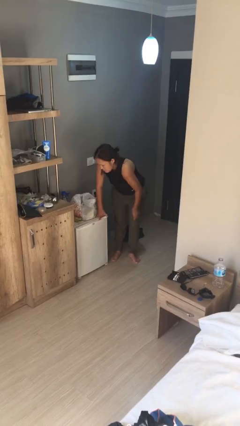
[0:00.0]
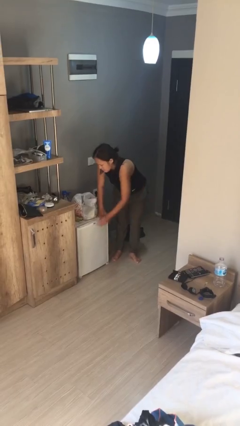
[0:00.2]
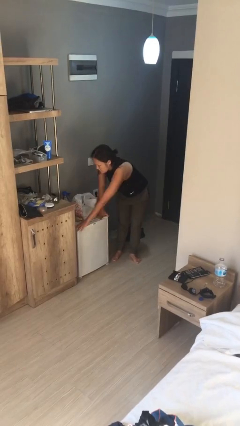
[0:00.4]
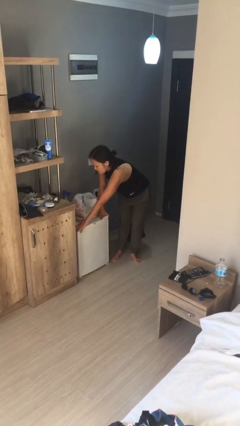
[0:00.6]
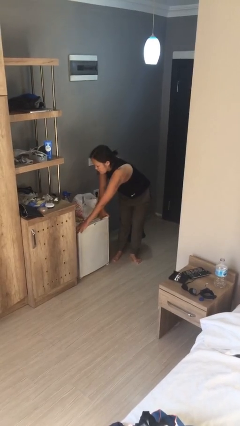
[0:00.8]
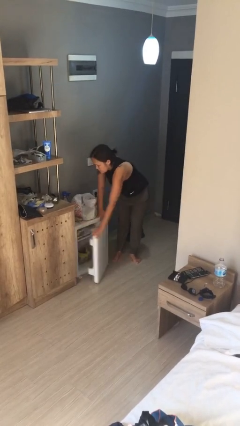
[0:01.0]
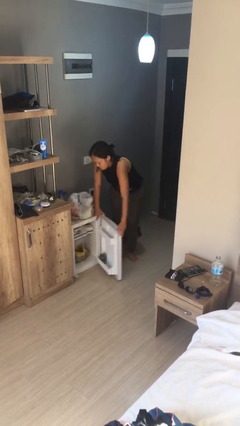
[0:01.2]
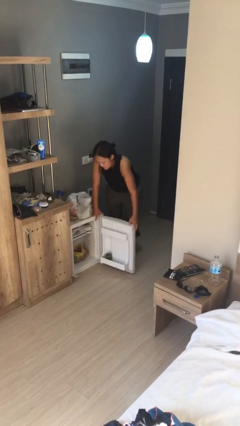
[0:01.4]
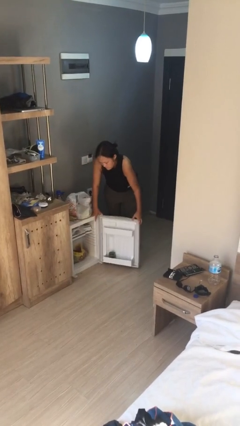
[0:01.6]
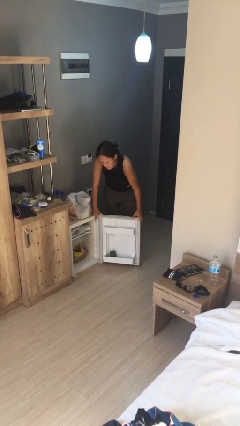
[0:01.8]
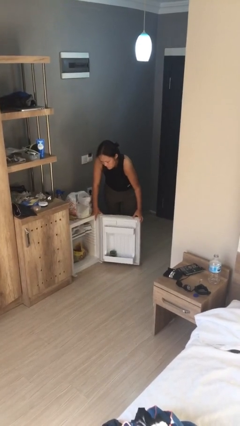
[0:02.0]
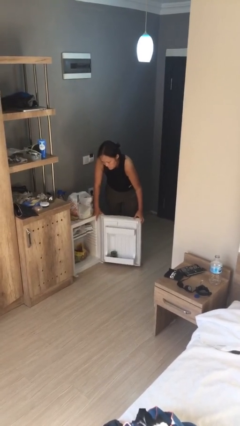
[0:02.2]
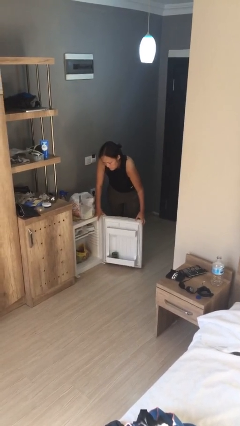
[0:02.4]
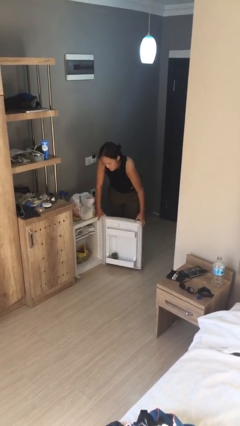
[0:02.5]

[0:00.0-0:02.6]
person opens refrigerator

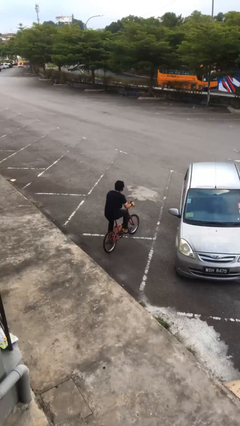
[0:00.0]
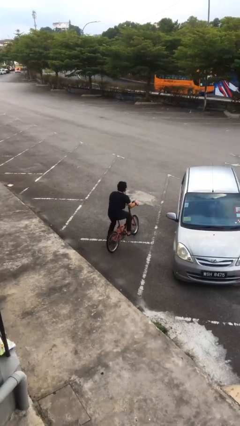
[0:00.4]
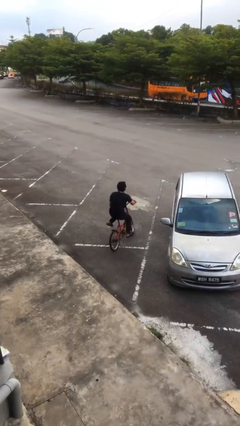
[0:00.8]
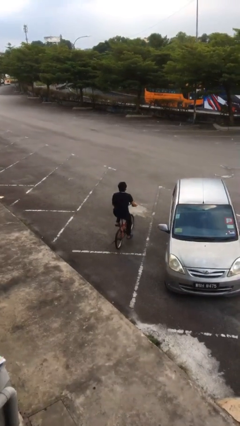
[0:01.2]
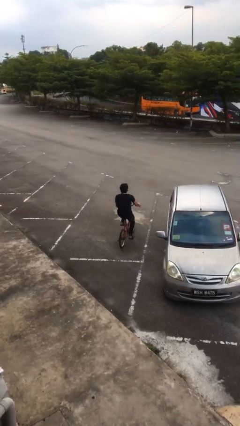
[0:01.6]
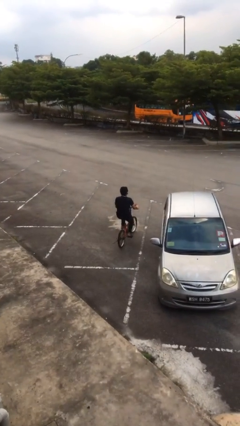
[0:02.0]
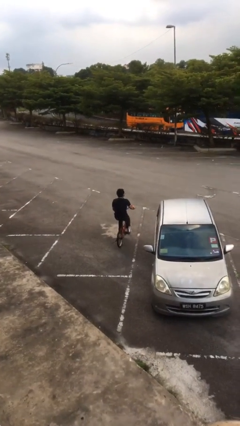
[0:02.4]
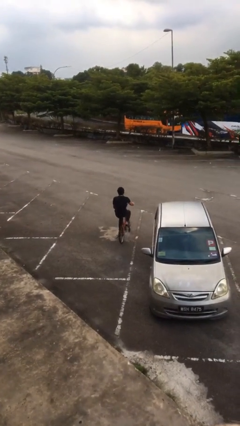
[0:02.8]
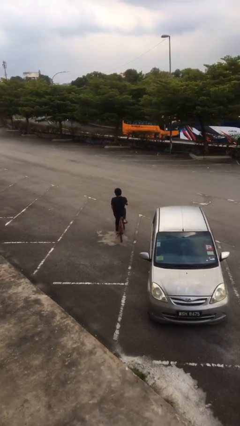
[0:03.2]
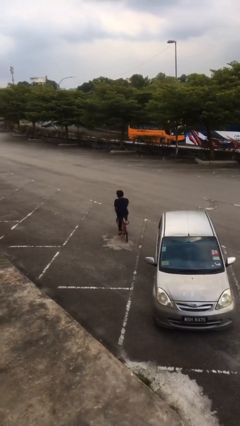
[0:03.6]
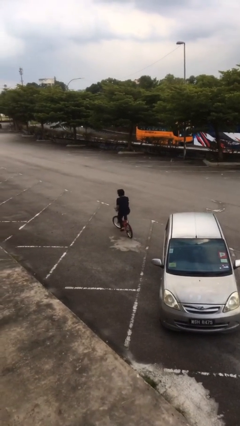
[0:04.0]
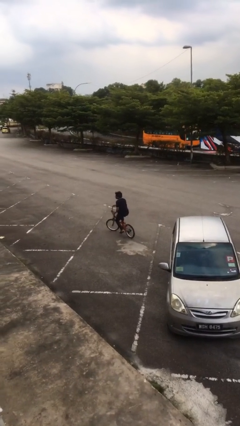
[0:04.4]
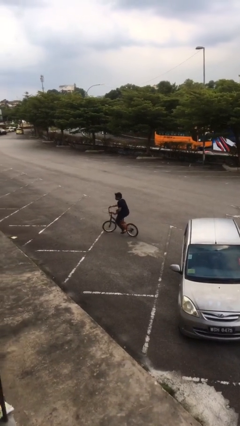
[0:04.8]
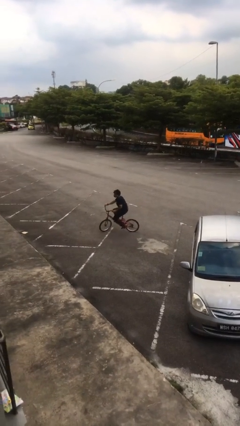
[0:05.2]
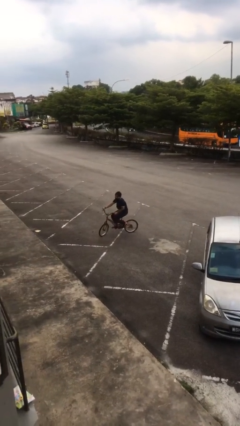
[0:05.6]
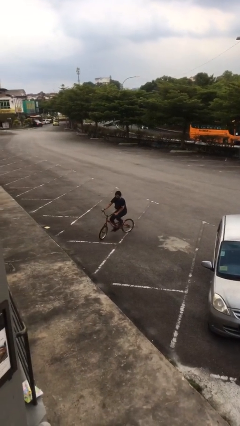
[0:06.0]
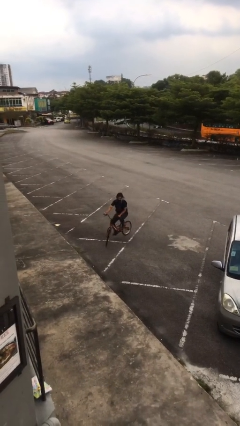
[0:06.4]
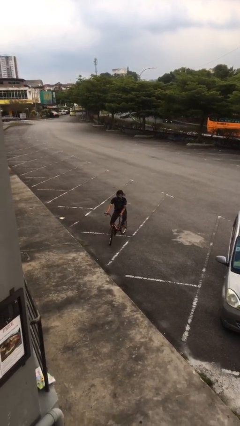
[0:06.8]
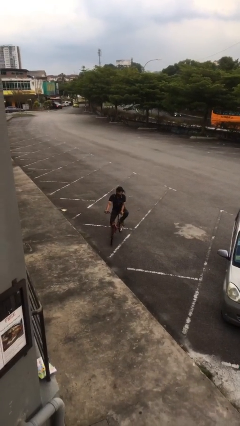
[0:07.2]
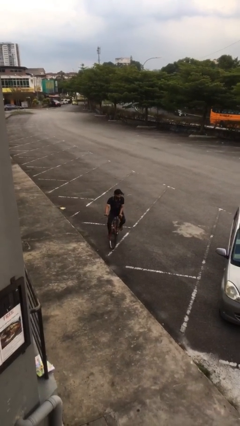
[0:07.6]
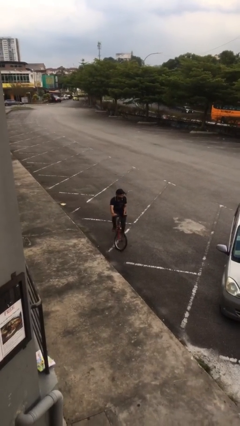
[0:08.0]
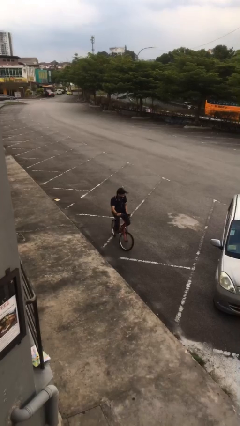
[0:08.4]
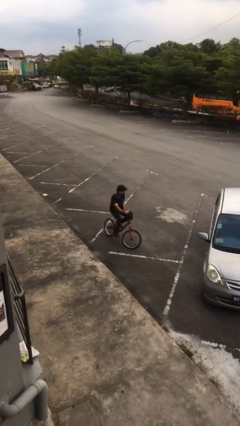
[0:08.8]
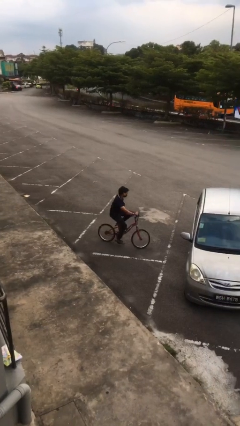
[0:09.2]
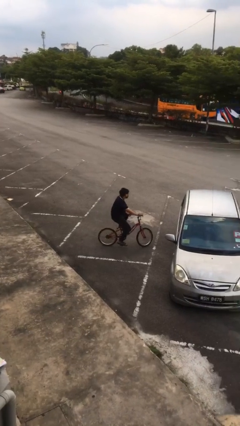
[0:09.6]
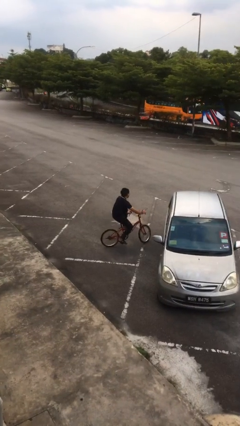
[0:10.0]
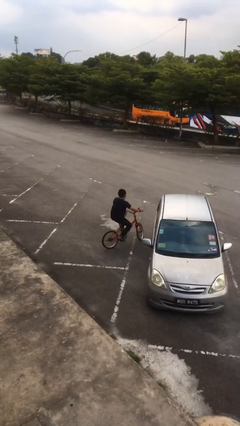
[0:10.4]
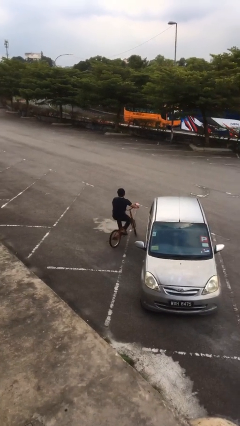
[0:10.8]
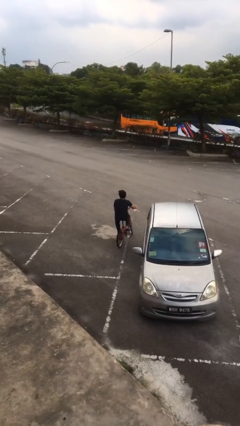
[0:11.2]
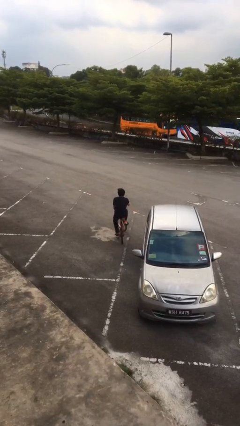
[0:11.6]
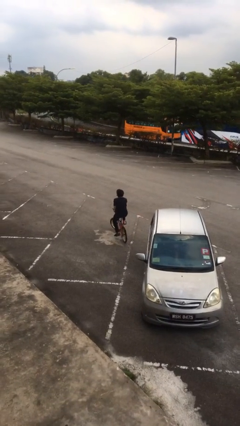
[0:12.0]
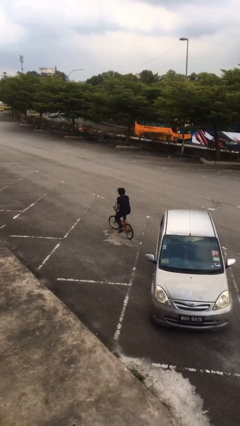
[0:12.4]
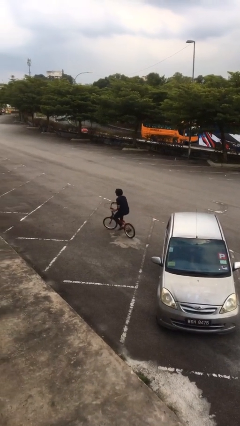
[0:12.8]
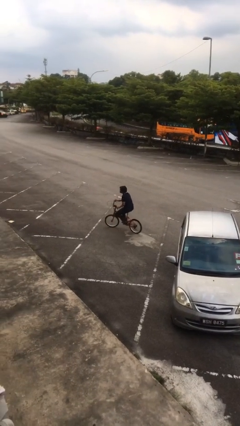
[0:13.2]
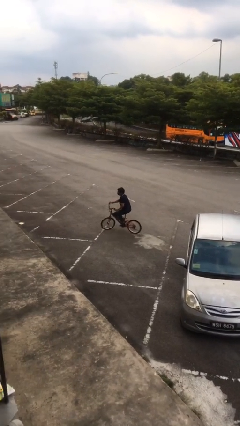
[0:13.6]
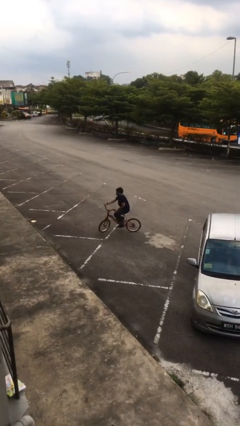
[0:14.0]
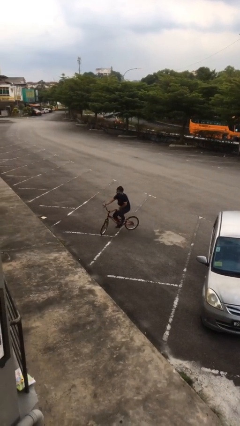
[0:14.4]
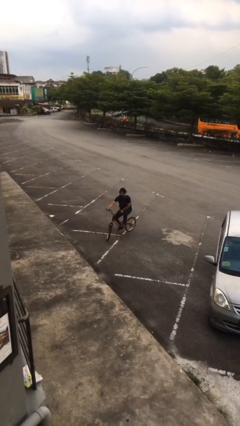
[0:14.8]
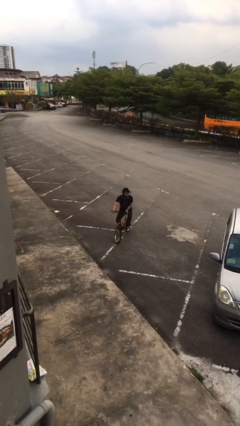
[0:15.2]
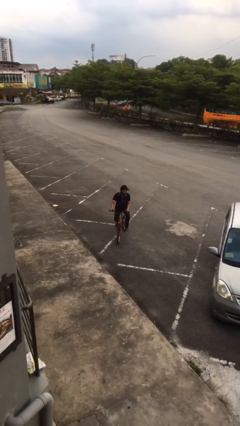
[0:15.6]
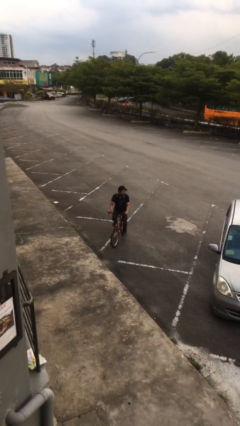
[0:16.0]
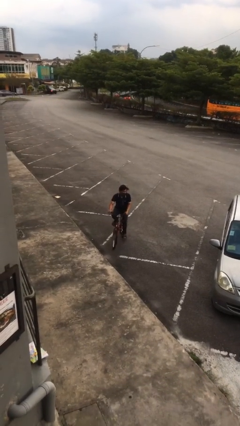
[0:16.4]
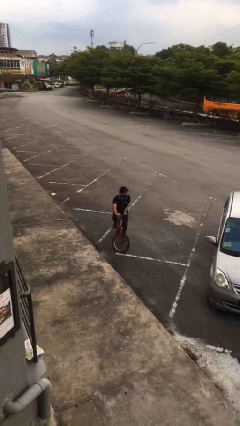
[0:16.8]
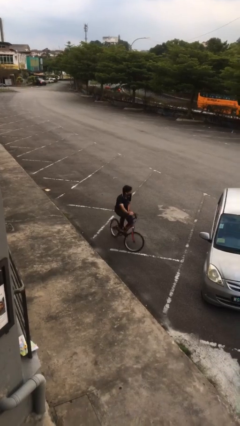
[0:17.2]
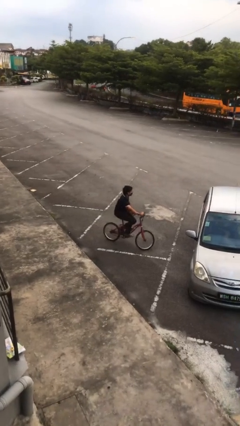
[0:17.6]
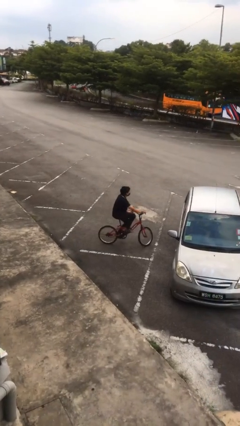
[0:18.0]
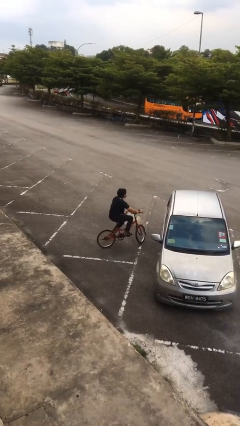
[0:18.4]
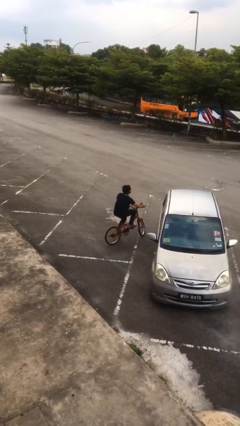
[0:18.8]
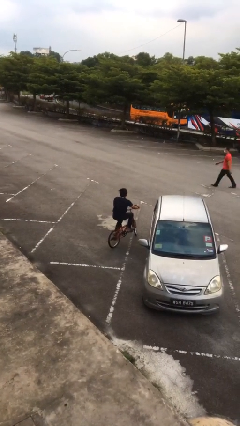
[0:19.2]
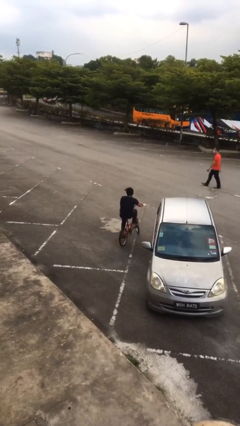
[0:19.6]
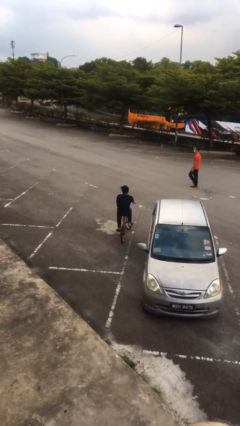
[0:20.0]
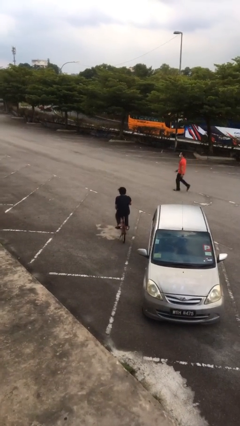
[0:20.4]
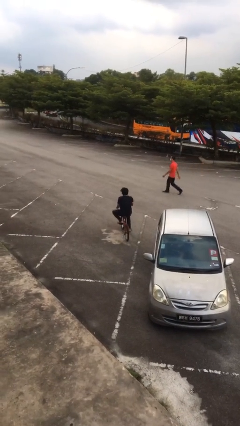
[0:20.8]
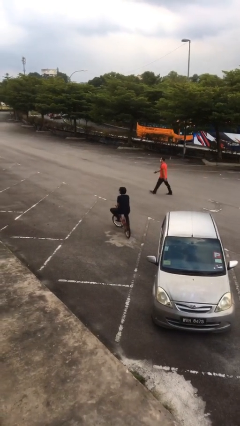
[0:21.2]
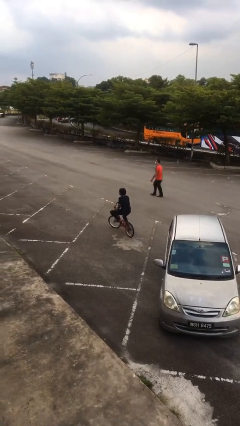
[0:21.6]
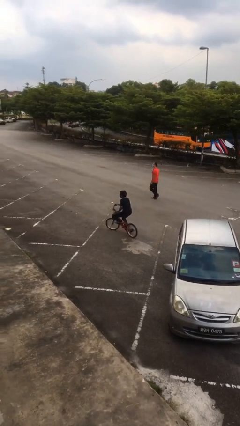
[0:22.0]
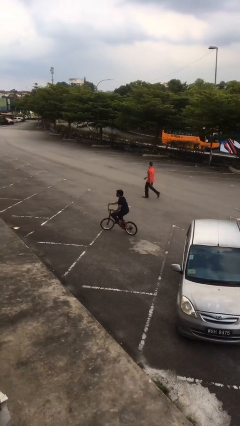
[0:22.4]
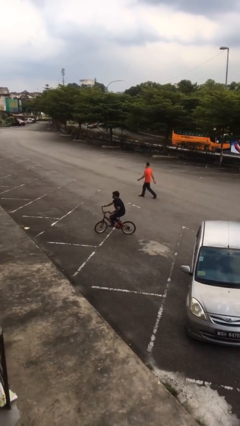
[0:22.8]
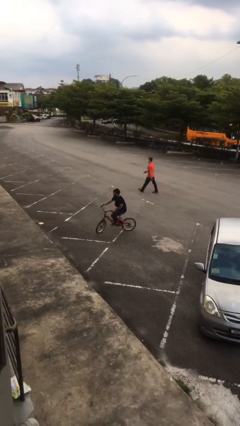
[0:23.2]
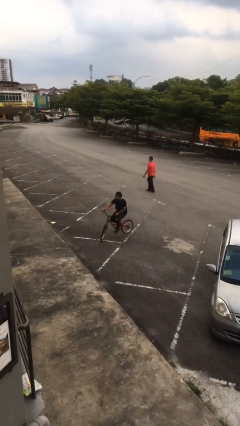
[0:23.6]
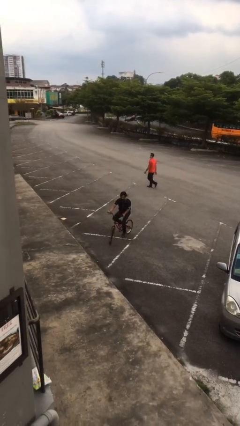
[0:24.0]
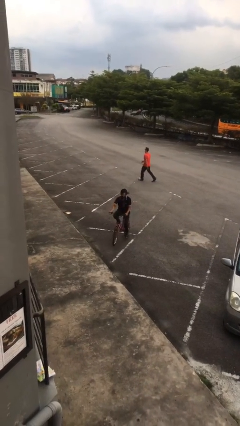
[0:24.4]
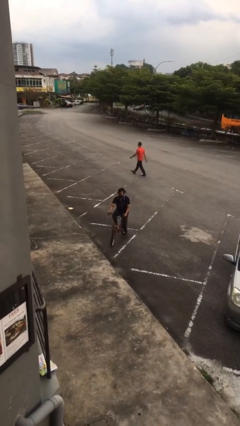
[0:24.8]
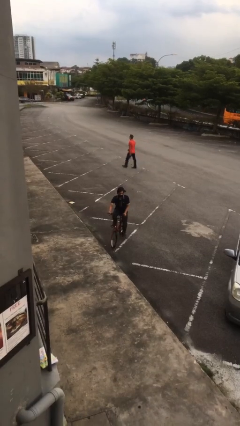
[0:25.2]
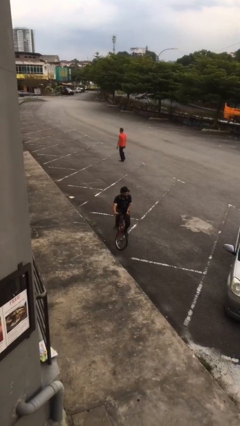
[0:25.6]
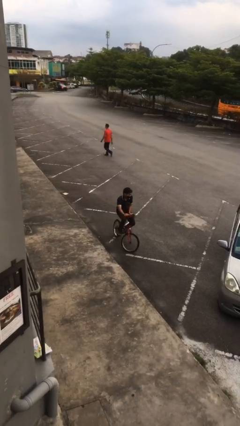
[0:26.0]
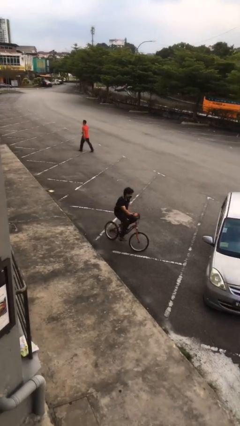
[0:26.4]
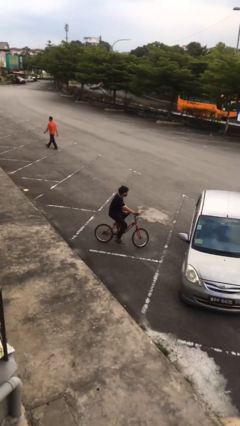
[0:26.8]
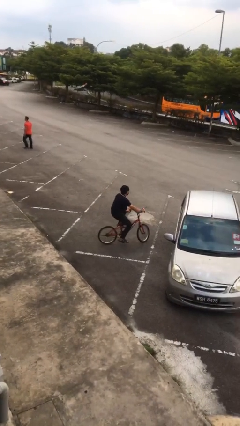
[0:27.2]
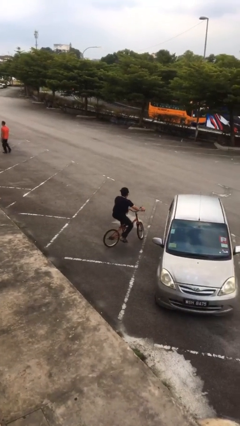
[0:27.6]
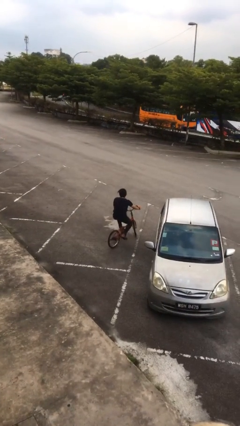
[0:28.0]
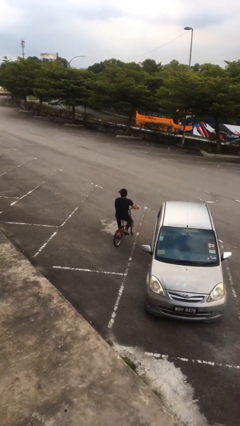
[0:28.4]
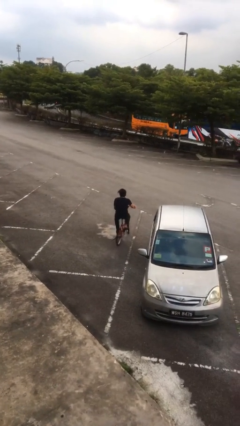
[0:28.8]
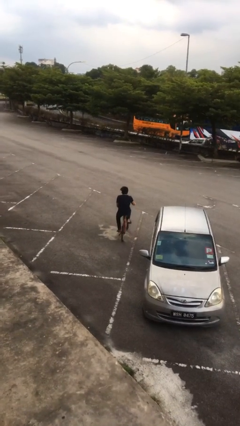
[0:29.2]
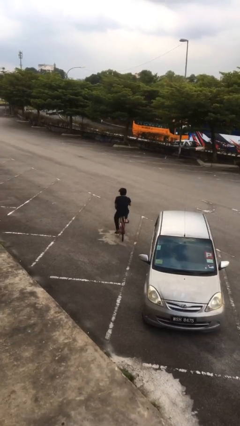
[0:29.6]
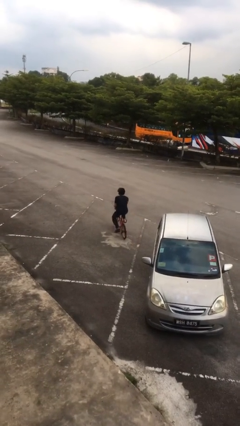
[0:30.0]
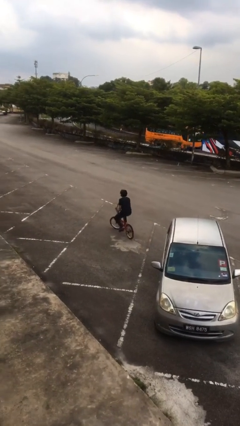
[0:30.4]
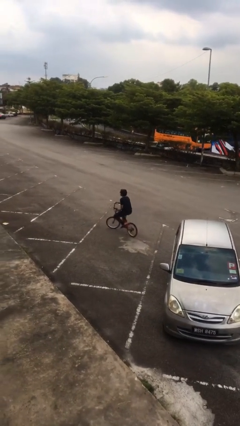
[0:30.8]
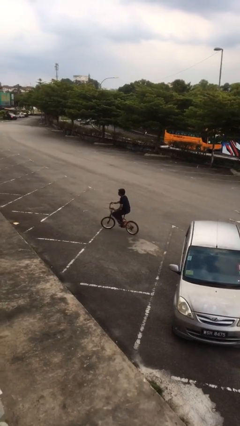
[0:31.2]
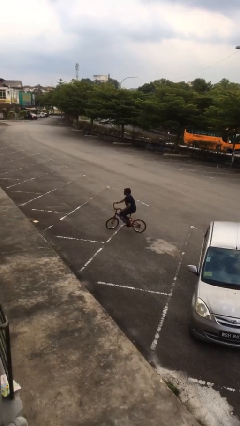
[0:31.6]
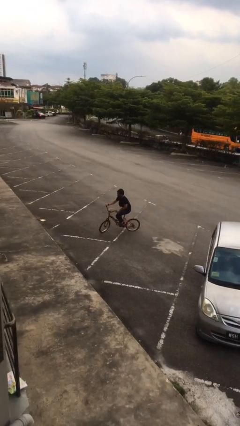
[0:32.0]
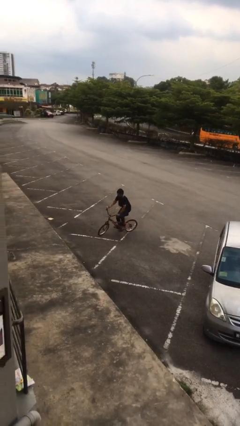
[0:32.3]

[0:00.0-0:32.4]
person rides bicycle
